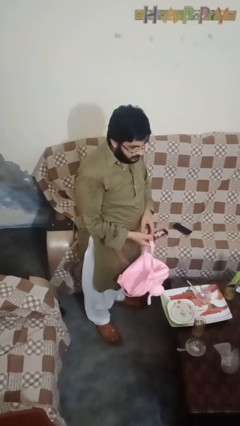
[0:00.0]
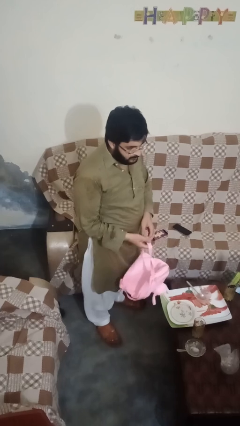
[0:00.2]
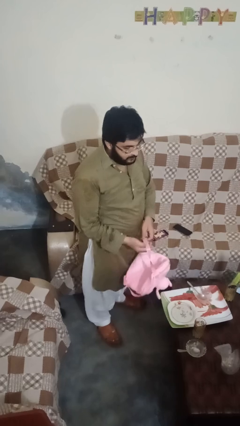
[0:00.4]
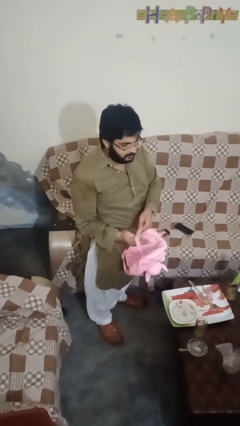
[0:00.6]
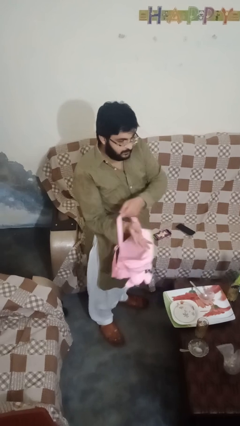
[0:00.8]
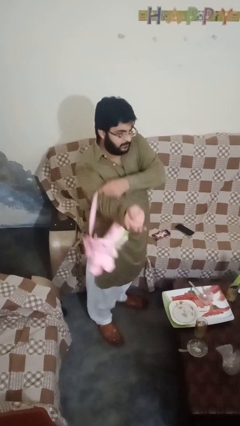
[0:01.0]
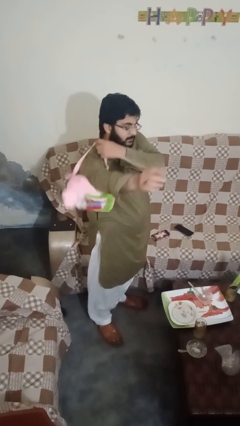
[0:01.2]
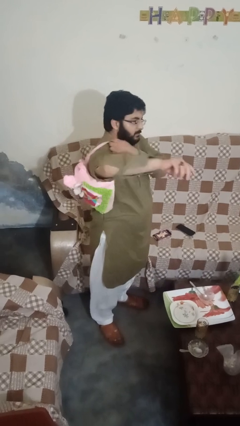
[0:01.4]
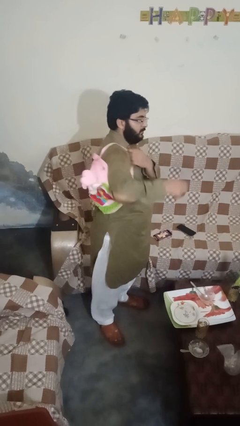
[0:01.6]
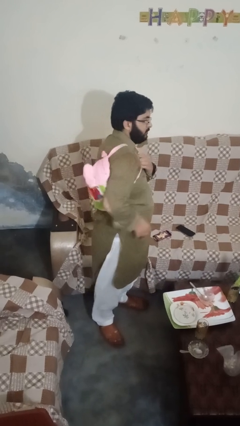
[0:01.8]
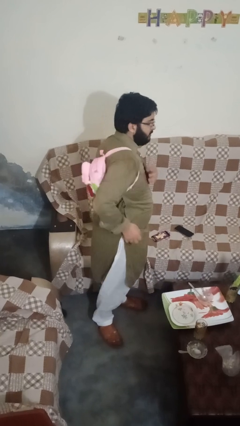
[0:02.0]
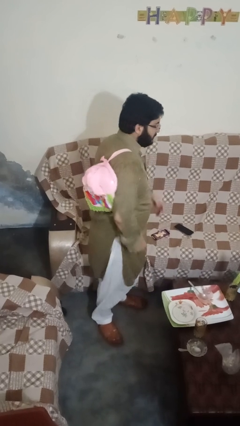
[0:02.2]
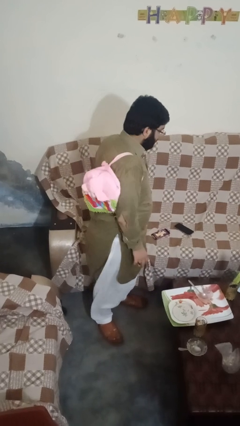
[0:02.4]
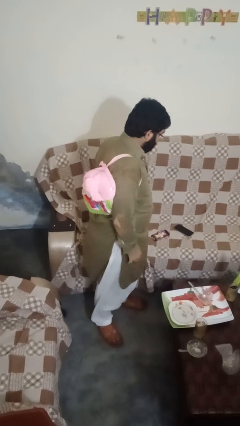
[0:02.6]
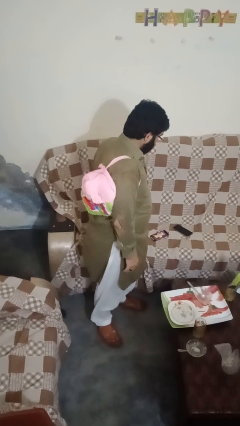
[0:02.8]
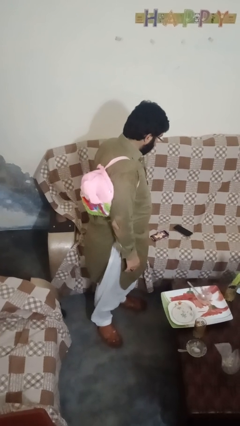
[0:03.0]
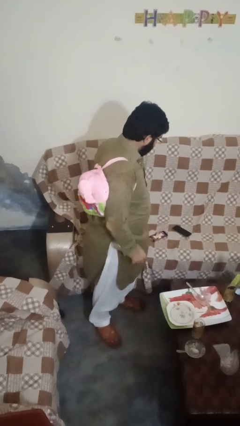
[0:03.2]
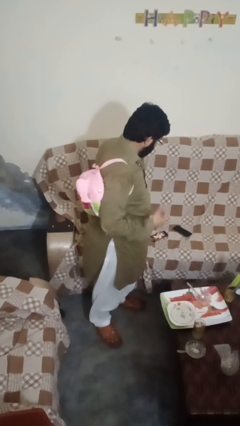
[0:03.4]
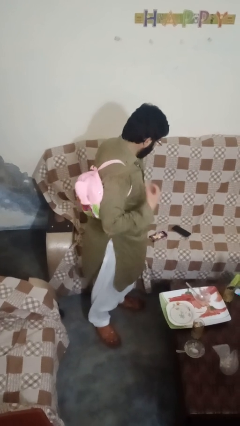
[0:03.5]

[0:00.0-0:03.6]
person puts on backpack

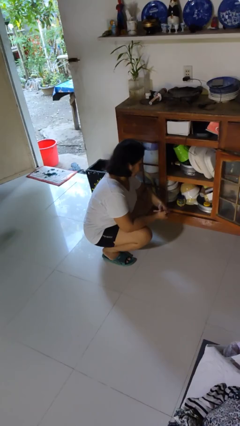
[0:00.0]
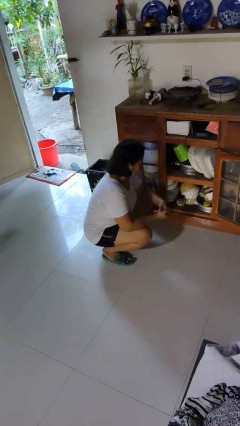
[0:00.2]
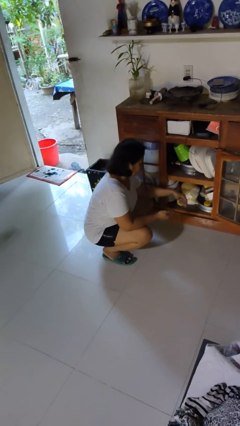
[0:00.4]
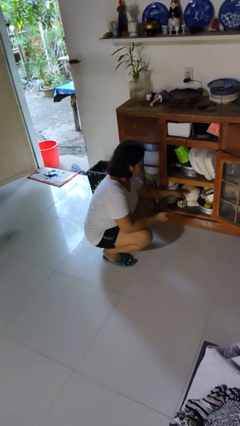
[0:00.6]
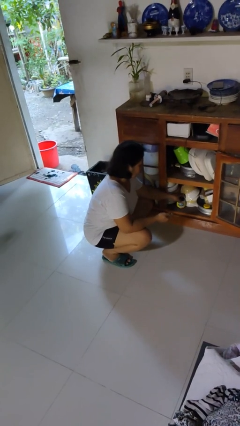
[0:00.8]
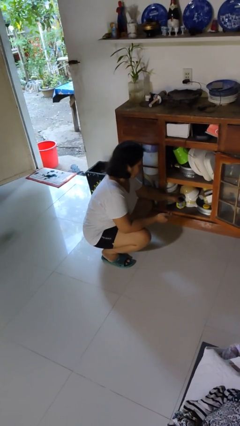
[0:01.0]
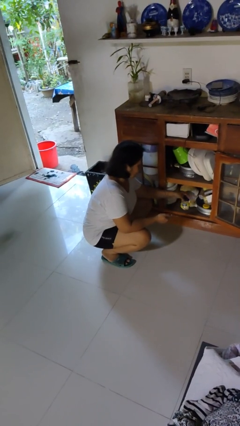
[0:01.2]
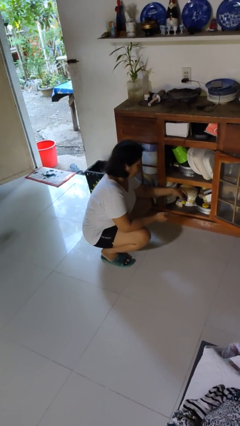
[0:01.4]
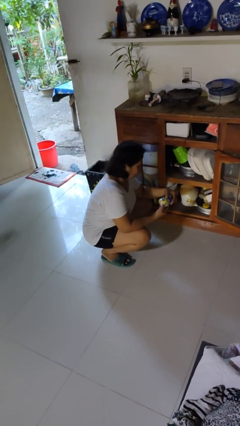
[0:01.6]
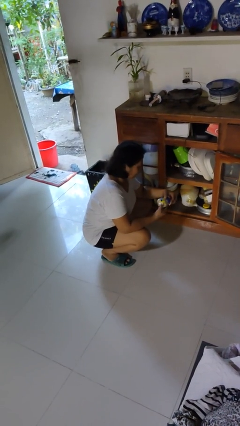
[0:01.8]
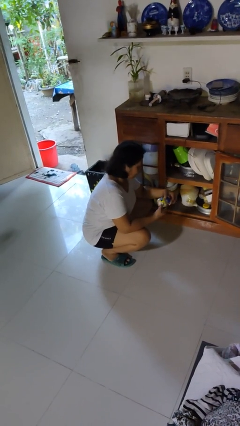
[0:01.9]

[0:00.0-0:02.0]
person picks up object from cabinet

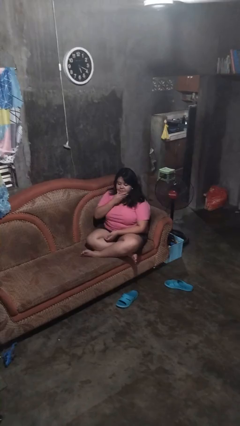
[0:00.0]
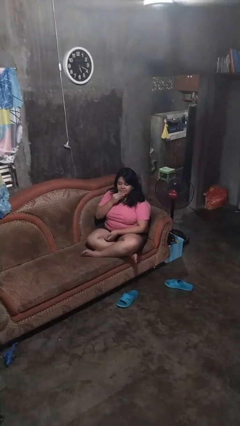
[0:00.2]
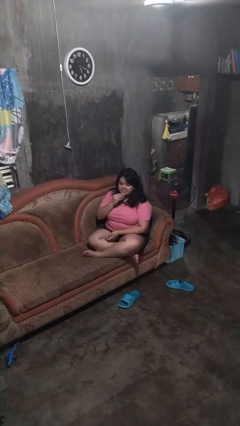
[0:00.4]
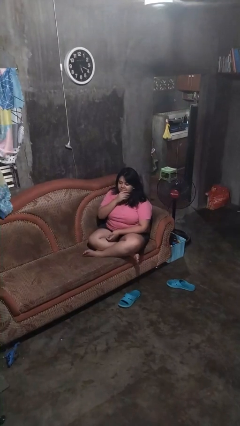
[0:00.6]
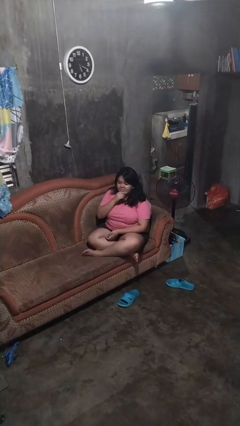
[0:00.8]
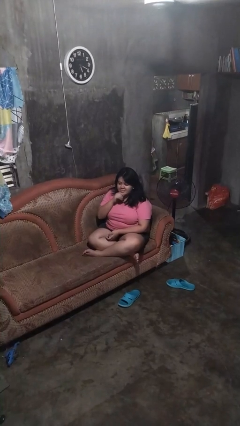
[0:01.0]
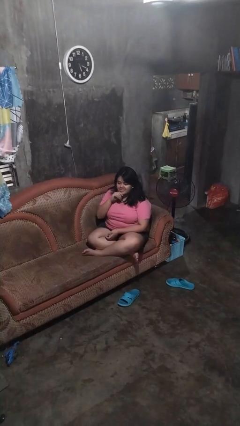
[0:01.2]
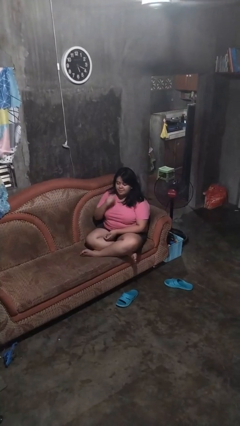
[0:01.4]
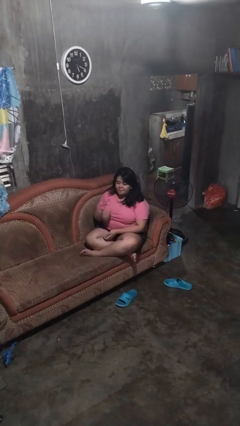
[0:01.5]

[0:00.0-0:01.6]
person strokes chin

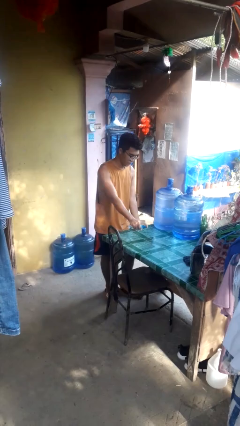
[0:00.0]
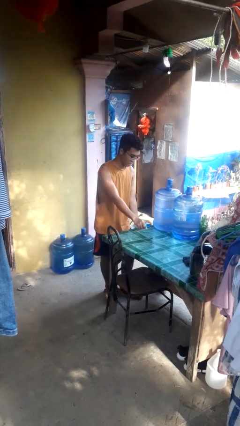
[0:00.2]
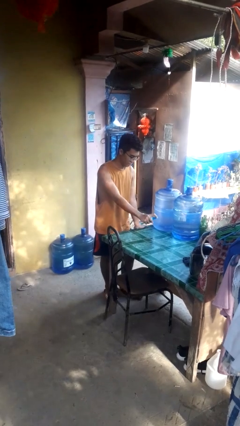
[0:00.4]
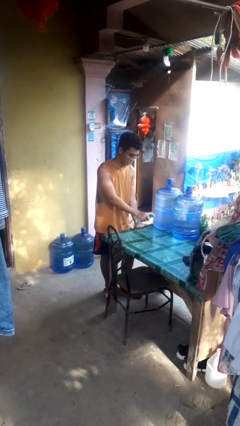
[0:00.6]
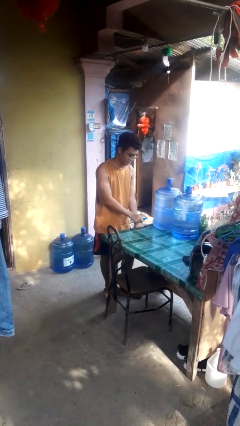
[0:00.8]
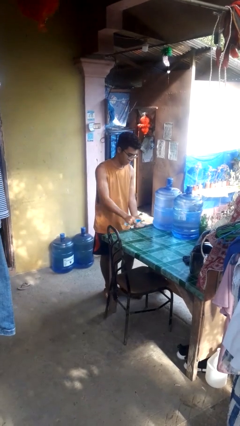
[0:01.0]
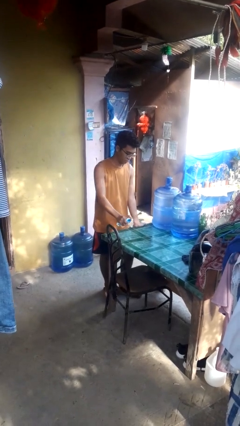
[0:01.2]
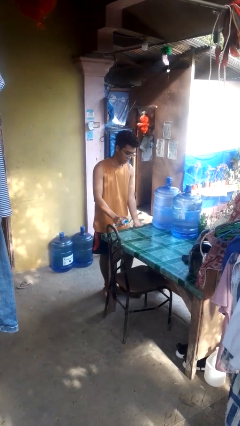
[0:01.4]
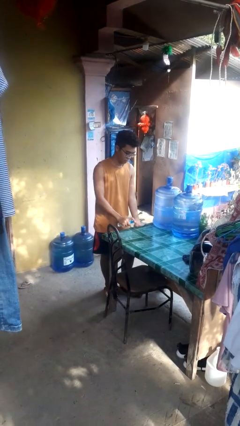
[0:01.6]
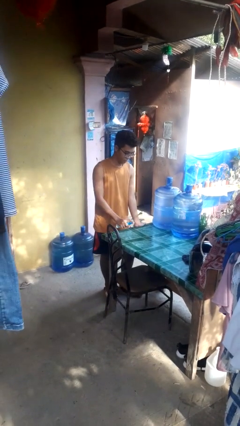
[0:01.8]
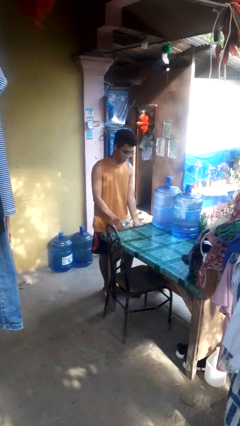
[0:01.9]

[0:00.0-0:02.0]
person sprays from bottle

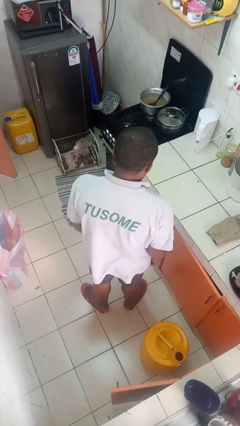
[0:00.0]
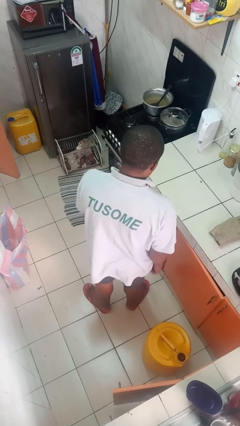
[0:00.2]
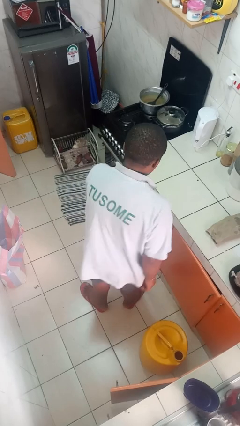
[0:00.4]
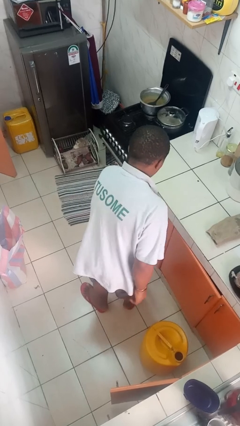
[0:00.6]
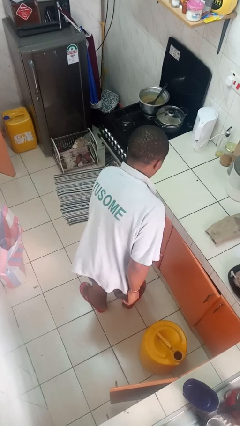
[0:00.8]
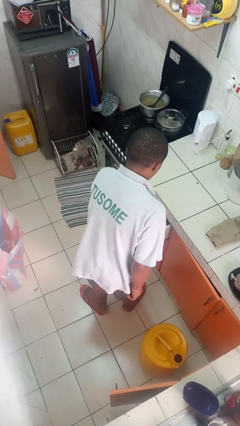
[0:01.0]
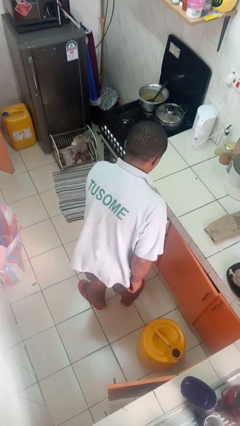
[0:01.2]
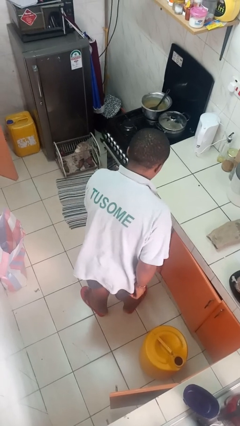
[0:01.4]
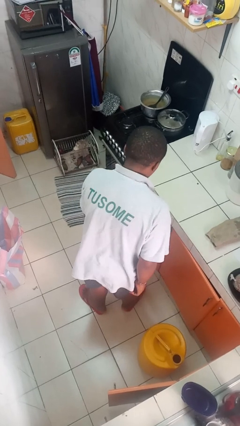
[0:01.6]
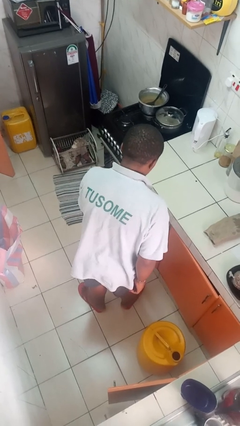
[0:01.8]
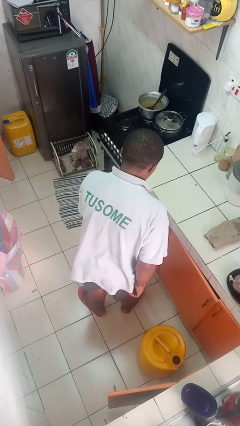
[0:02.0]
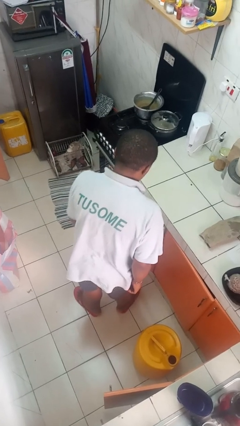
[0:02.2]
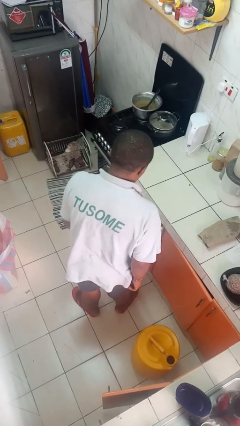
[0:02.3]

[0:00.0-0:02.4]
person opens kitchen drawer

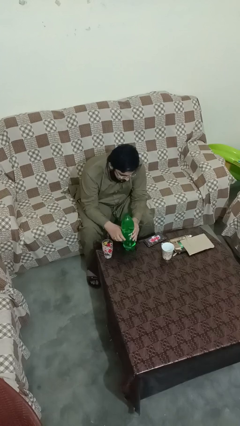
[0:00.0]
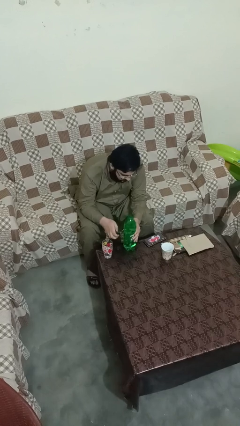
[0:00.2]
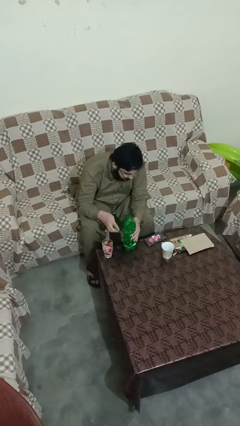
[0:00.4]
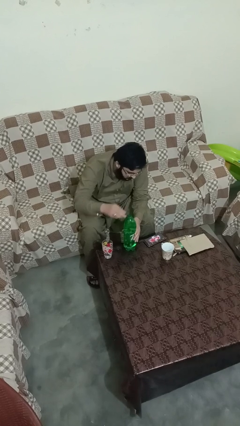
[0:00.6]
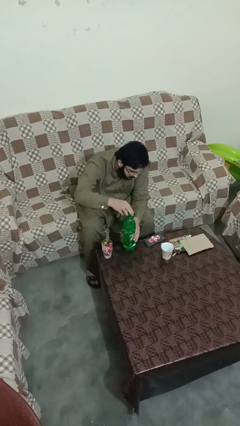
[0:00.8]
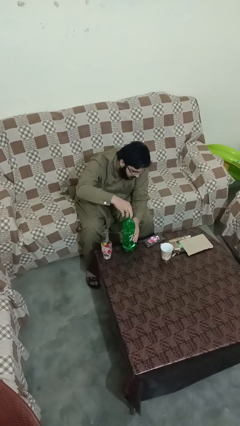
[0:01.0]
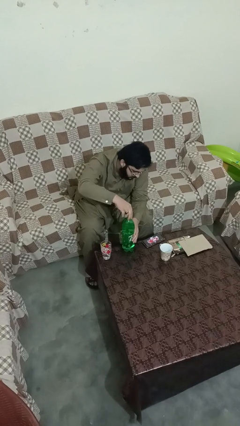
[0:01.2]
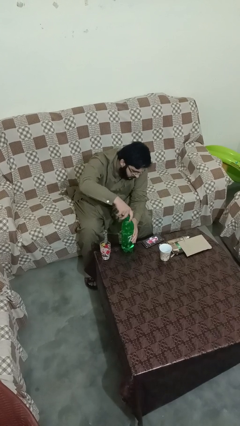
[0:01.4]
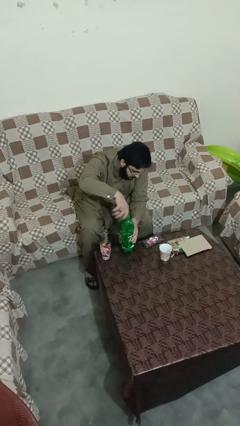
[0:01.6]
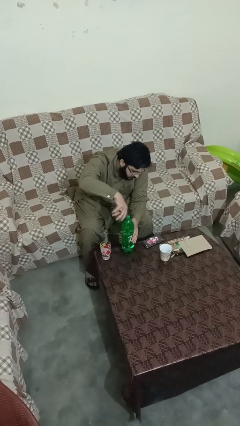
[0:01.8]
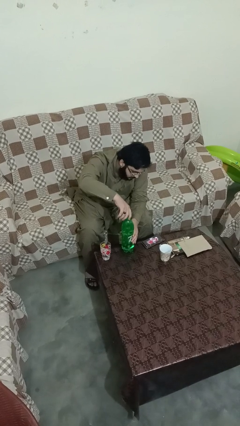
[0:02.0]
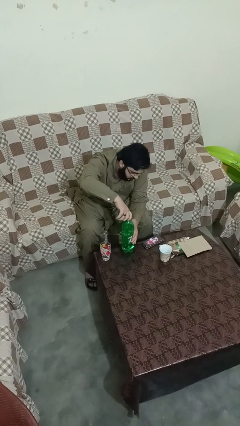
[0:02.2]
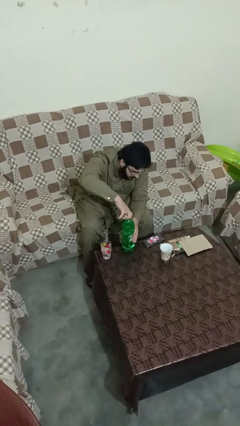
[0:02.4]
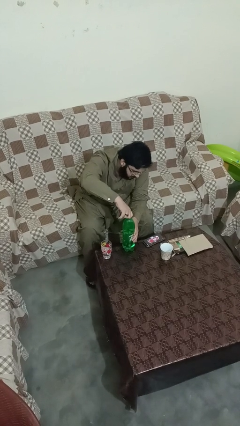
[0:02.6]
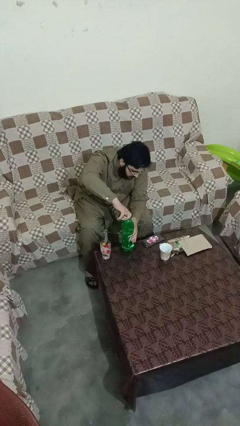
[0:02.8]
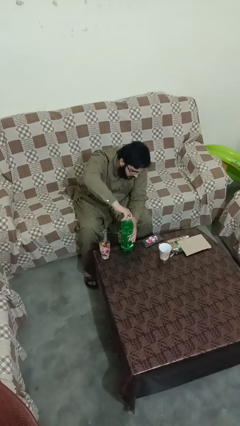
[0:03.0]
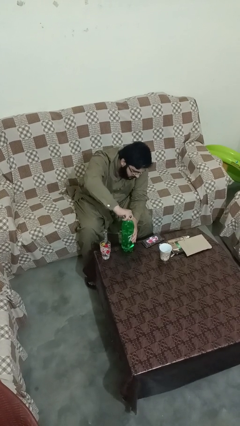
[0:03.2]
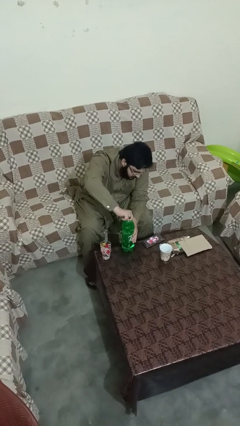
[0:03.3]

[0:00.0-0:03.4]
person screws lid to bottle

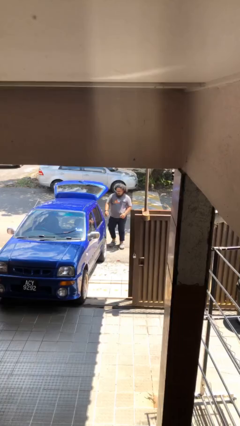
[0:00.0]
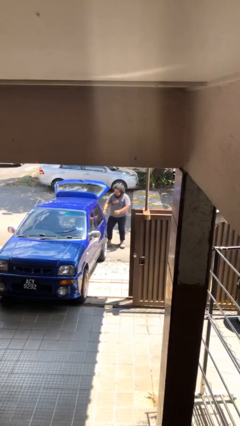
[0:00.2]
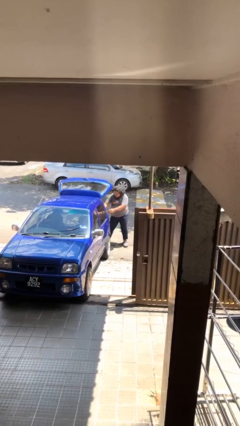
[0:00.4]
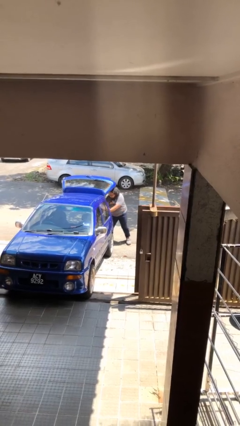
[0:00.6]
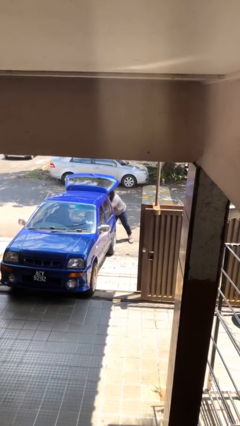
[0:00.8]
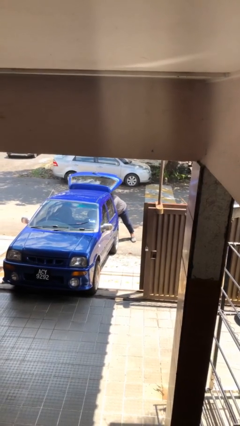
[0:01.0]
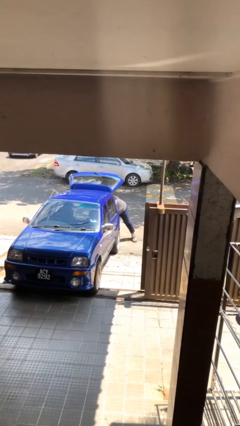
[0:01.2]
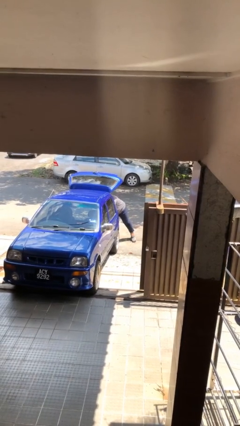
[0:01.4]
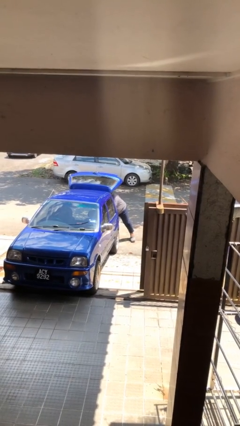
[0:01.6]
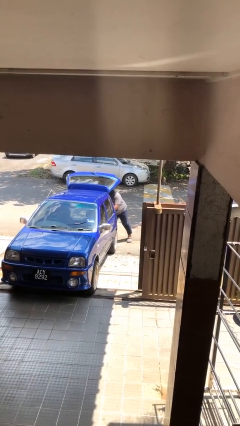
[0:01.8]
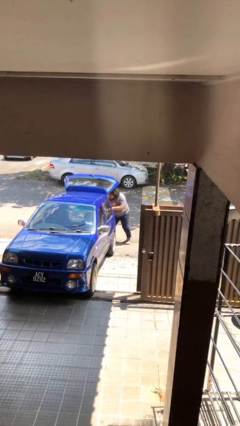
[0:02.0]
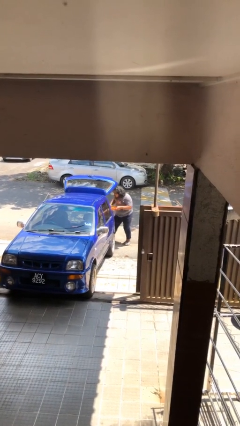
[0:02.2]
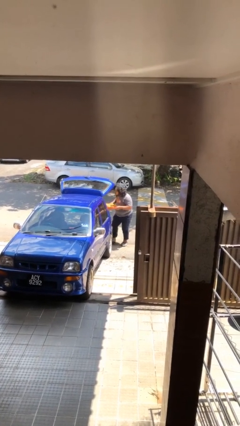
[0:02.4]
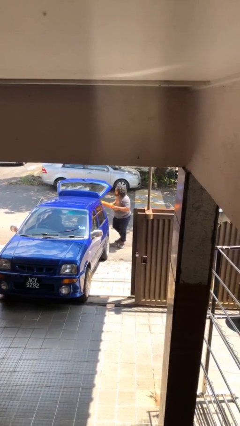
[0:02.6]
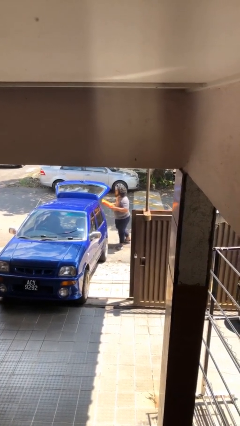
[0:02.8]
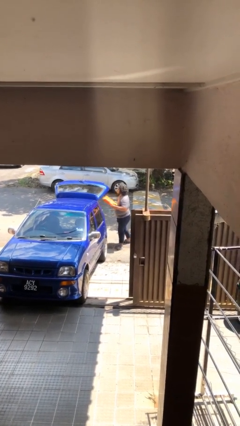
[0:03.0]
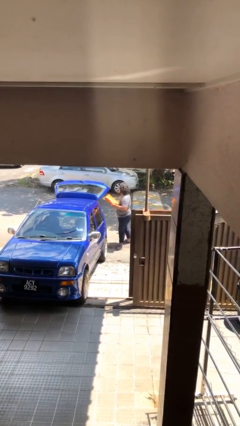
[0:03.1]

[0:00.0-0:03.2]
person unloads car
